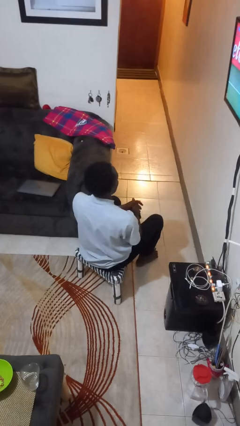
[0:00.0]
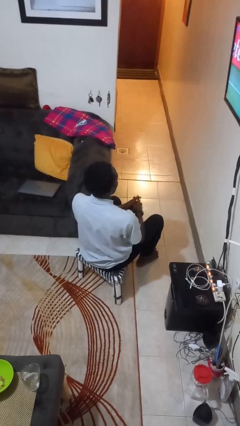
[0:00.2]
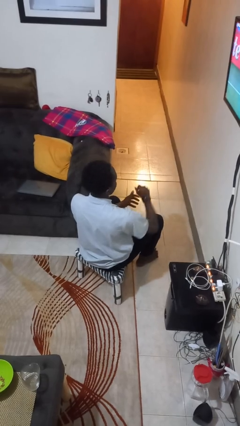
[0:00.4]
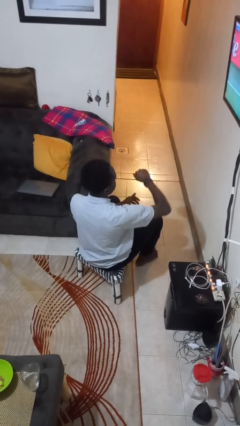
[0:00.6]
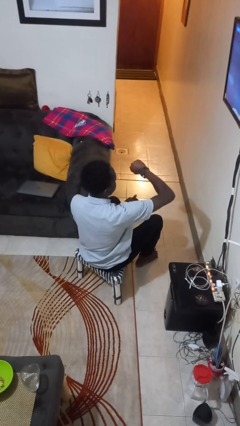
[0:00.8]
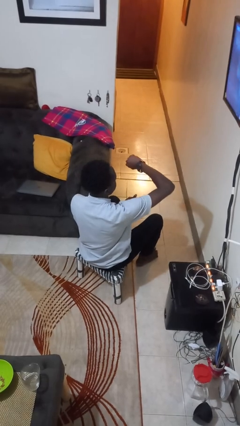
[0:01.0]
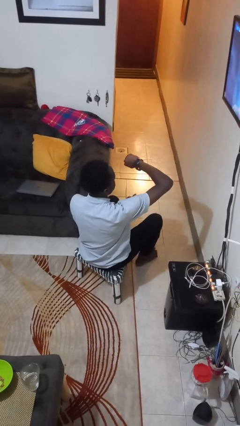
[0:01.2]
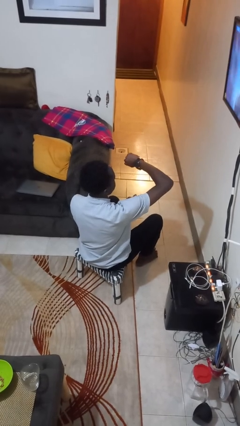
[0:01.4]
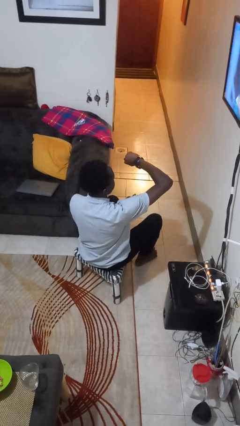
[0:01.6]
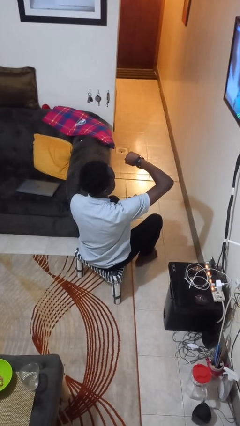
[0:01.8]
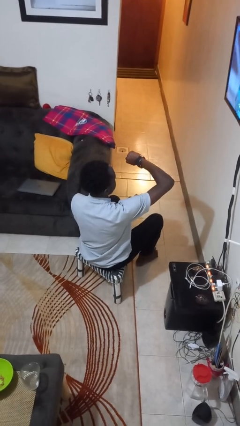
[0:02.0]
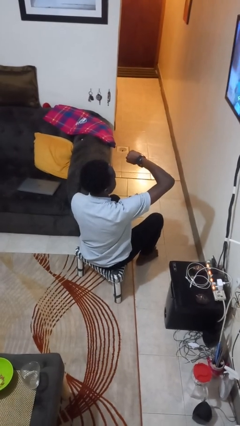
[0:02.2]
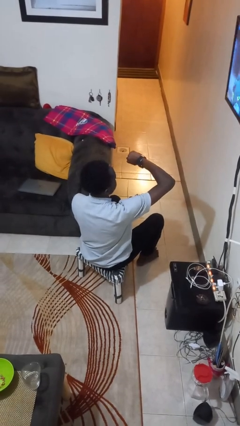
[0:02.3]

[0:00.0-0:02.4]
person looks at wristwatch

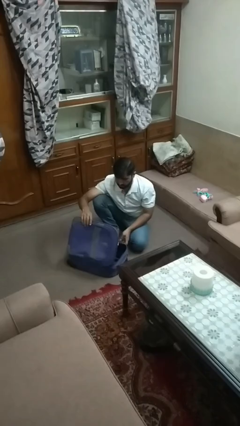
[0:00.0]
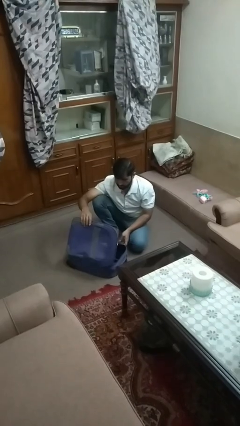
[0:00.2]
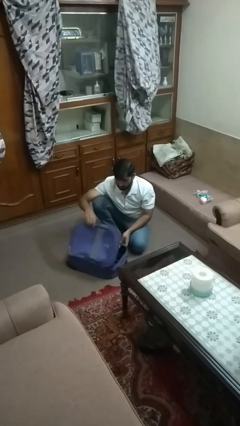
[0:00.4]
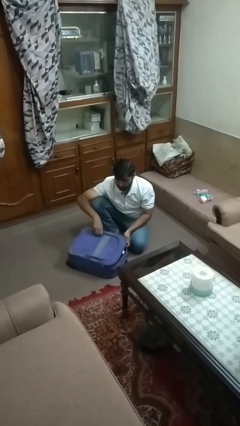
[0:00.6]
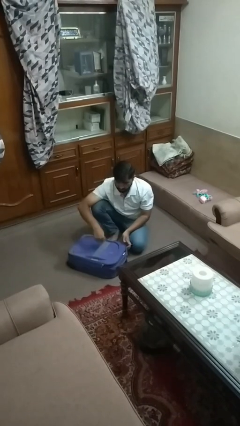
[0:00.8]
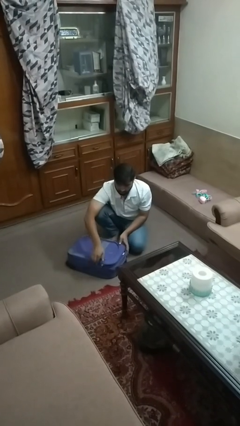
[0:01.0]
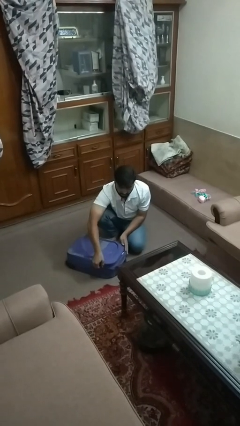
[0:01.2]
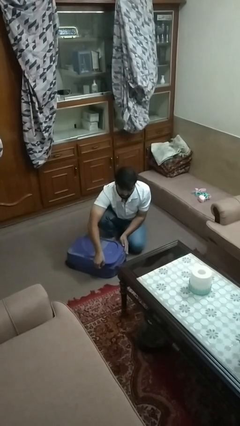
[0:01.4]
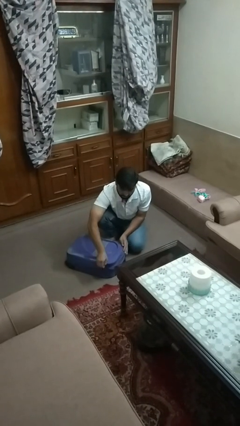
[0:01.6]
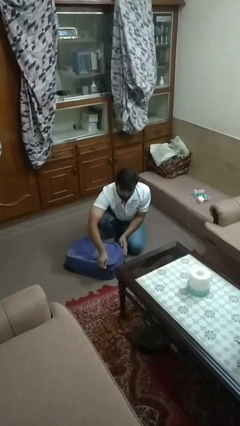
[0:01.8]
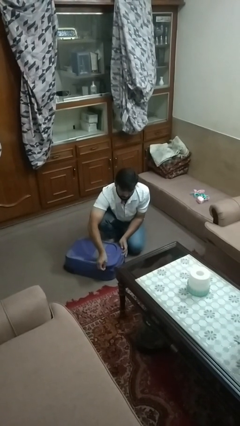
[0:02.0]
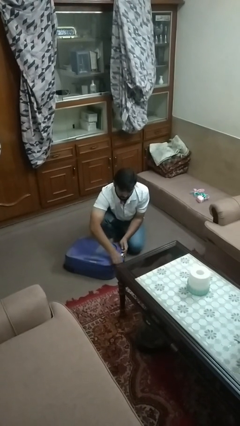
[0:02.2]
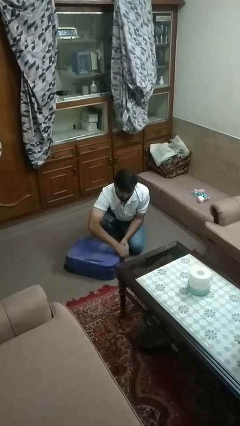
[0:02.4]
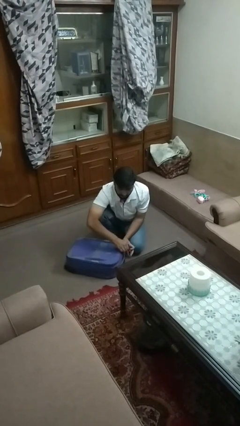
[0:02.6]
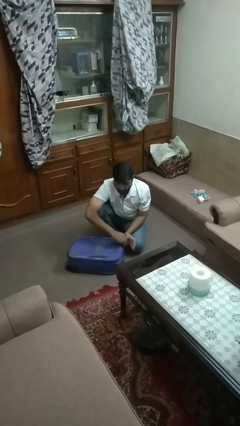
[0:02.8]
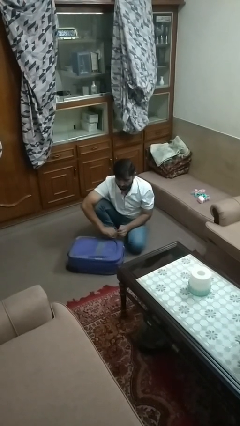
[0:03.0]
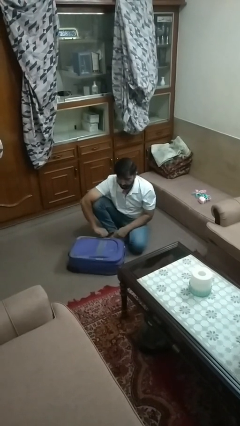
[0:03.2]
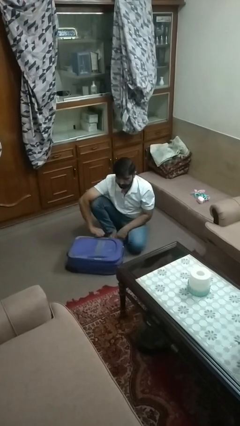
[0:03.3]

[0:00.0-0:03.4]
person closes suitcase

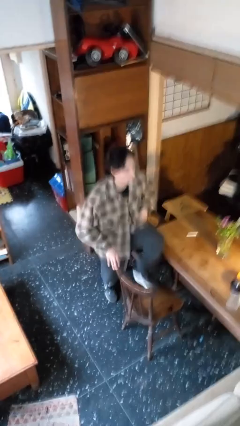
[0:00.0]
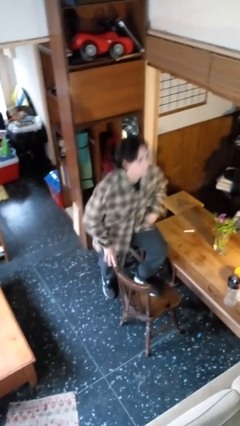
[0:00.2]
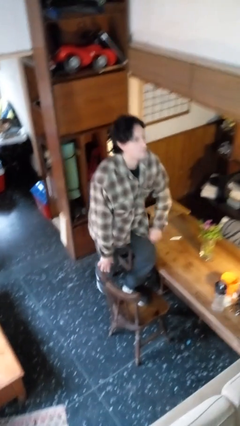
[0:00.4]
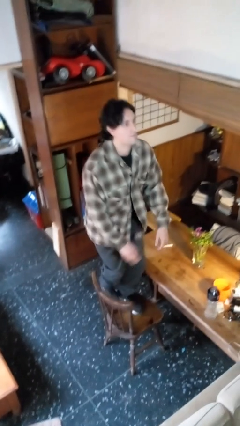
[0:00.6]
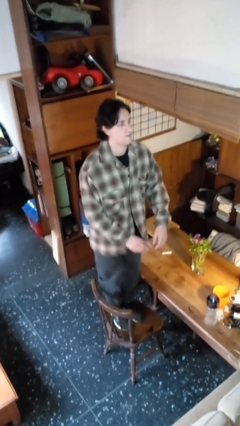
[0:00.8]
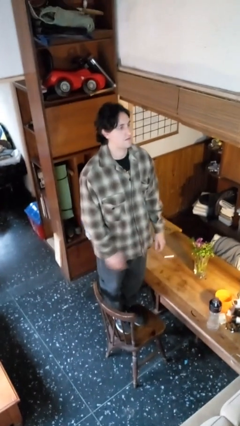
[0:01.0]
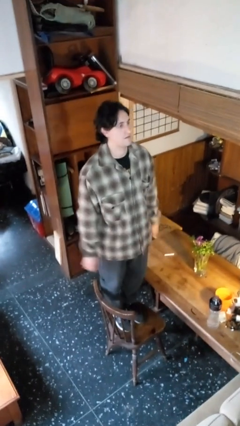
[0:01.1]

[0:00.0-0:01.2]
person climbs on chair

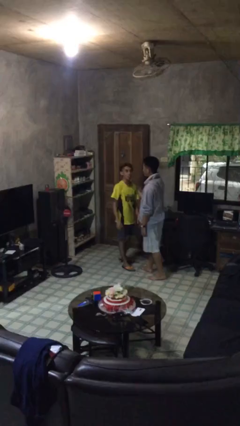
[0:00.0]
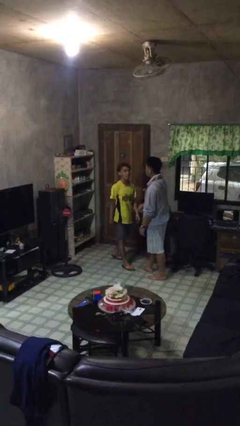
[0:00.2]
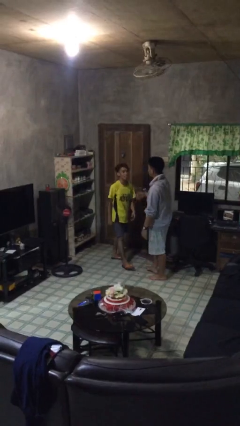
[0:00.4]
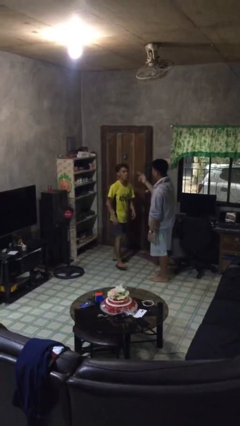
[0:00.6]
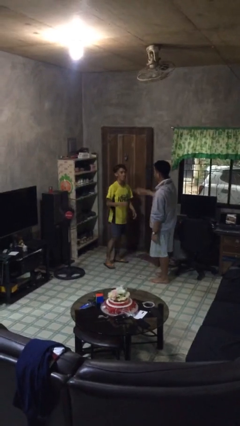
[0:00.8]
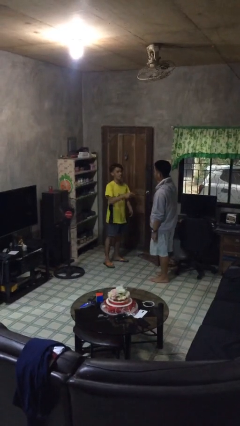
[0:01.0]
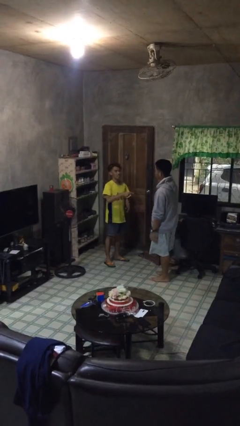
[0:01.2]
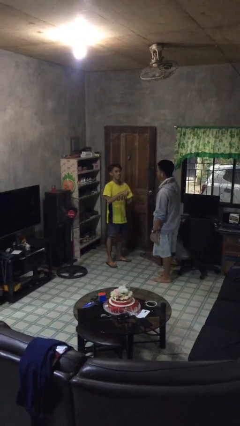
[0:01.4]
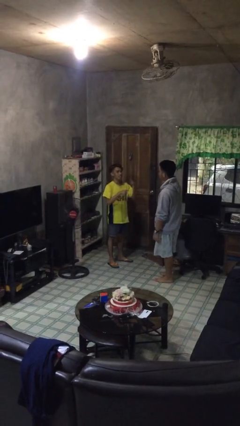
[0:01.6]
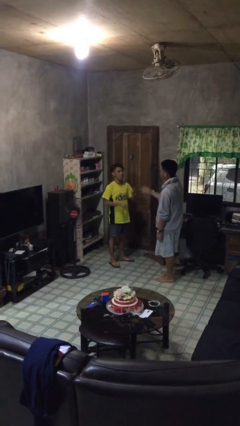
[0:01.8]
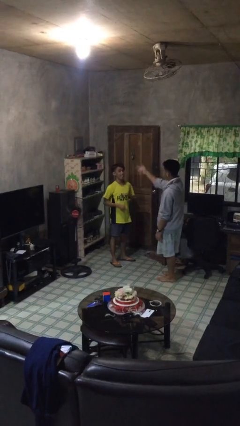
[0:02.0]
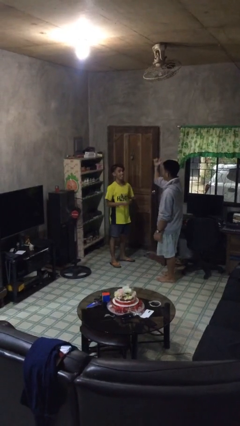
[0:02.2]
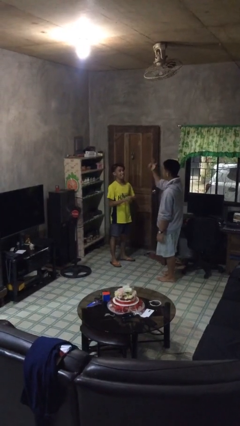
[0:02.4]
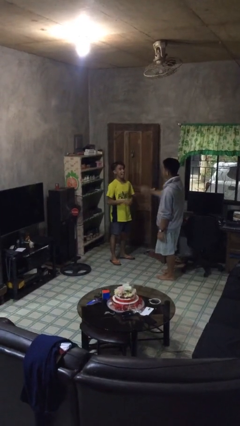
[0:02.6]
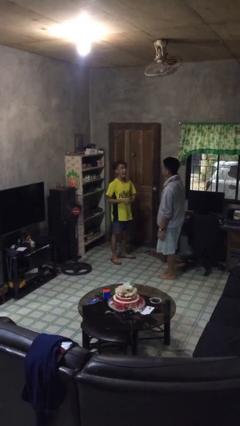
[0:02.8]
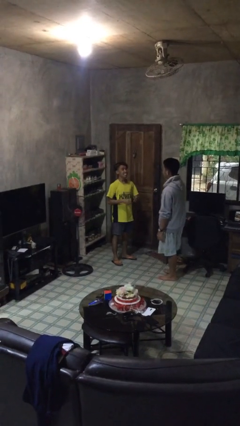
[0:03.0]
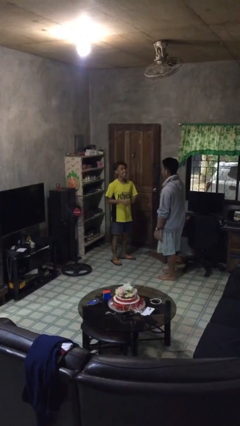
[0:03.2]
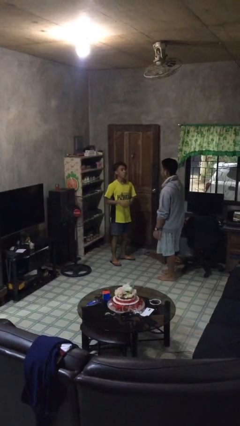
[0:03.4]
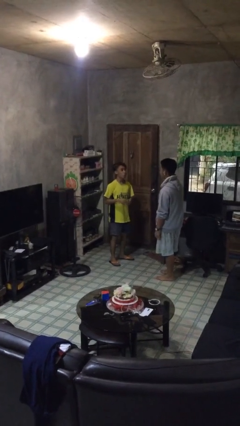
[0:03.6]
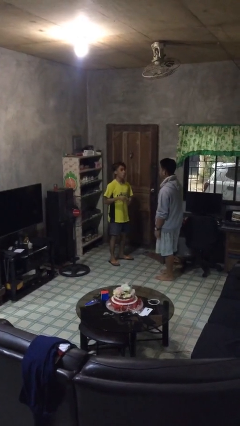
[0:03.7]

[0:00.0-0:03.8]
person talks to person

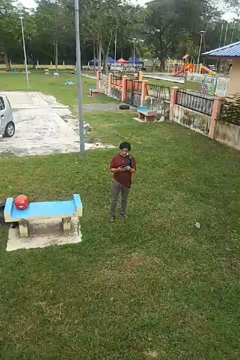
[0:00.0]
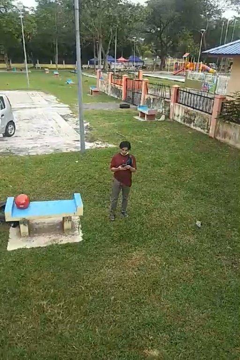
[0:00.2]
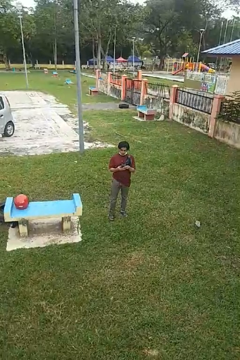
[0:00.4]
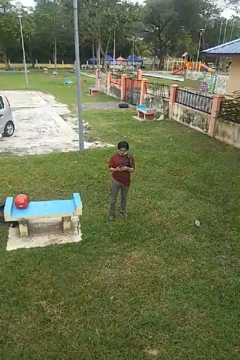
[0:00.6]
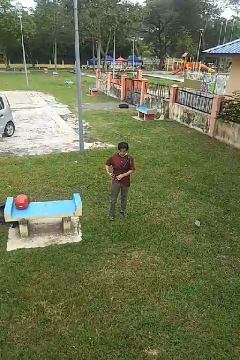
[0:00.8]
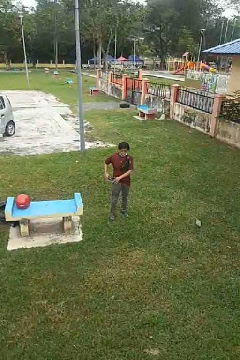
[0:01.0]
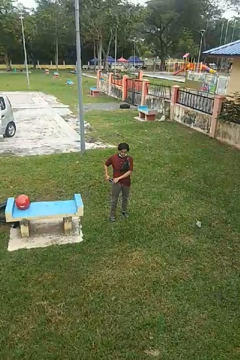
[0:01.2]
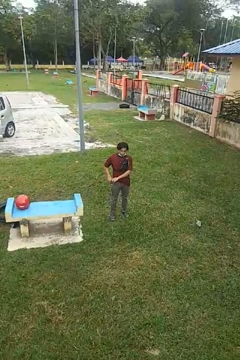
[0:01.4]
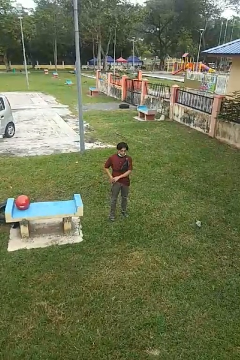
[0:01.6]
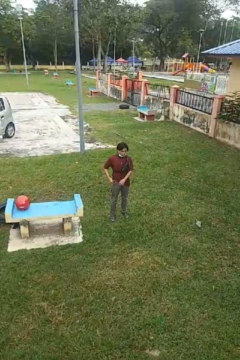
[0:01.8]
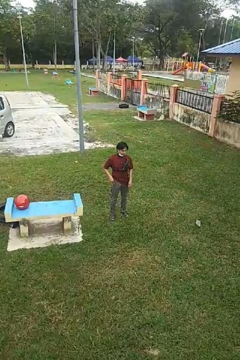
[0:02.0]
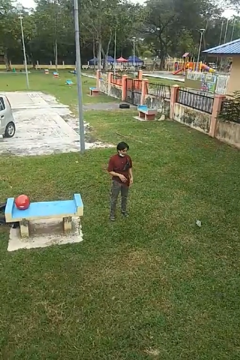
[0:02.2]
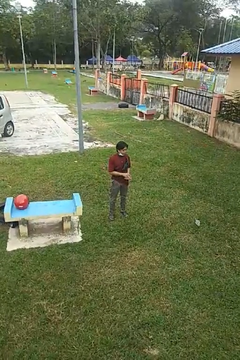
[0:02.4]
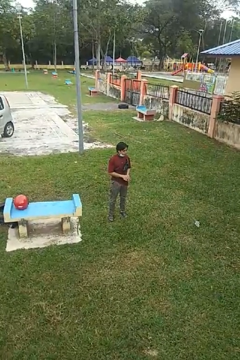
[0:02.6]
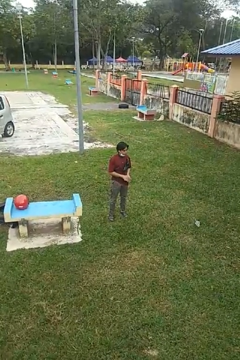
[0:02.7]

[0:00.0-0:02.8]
person puts phone into pocket

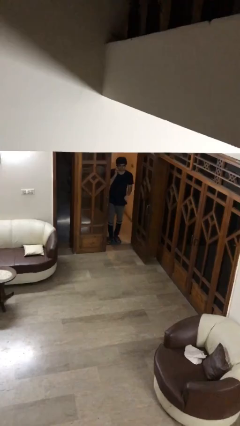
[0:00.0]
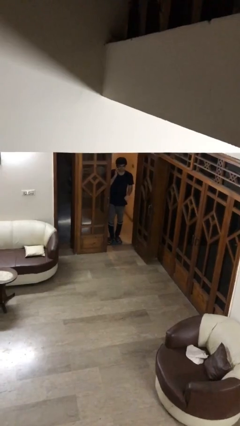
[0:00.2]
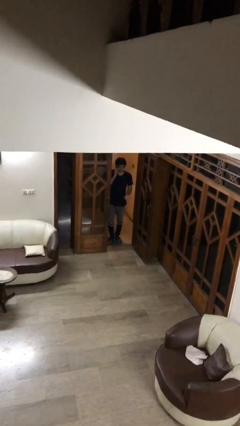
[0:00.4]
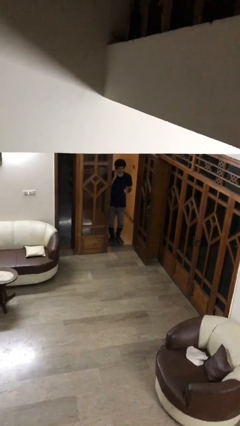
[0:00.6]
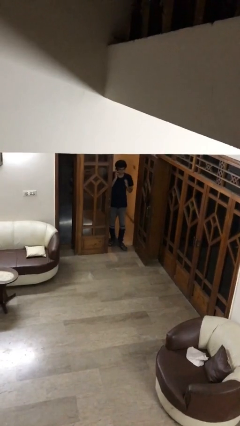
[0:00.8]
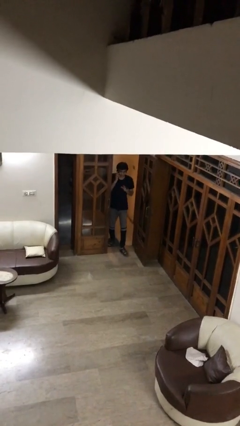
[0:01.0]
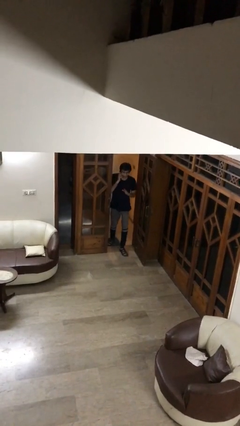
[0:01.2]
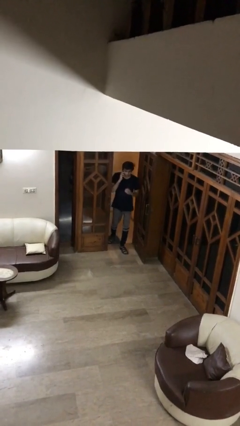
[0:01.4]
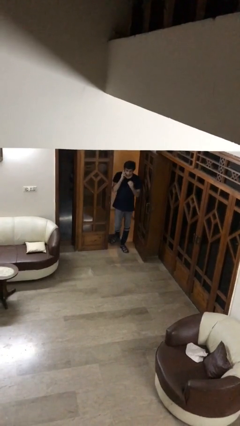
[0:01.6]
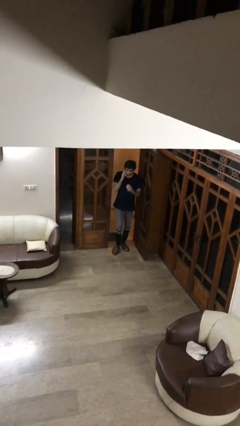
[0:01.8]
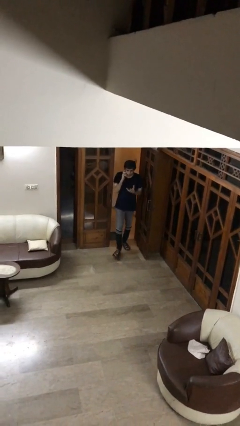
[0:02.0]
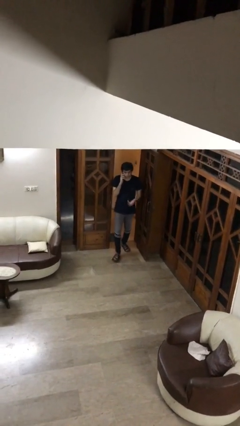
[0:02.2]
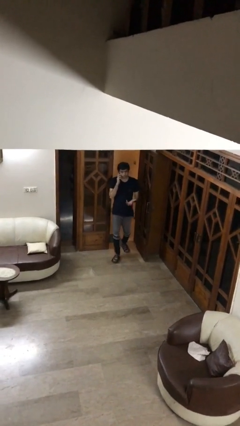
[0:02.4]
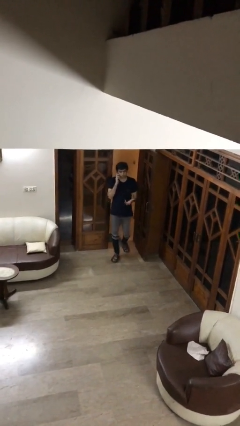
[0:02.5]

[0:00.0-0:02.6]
person enters scene through structure

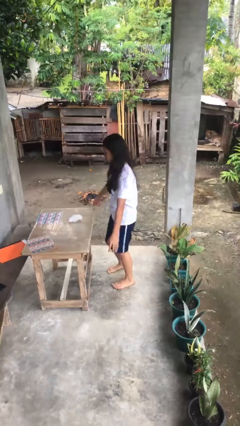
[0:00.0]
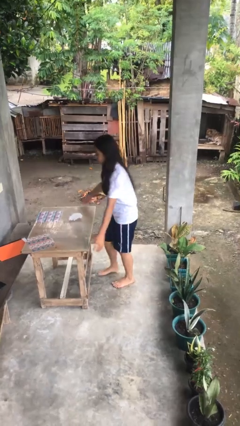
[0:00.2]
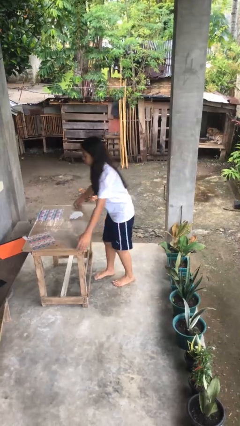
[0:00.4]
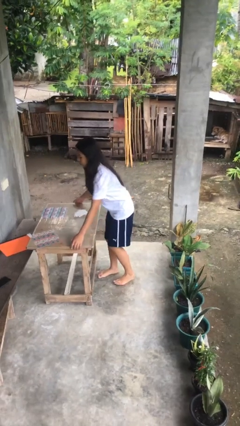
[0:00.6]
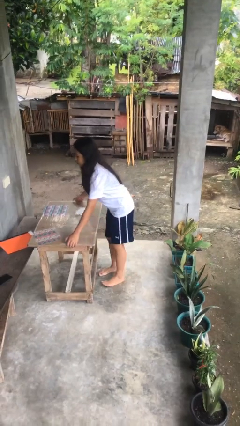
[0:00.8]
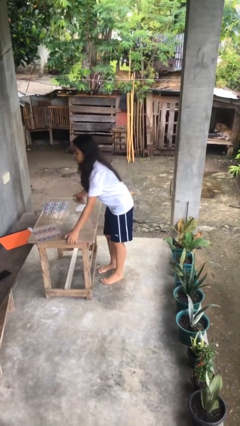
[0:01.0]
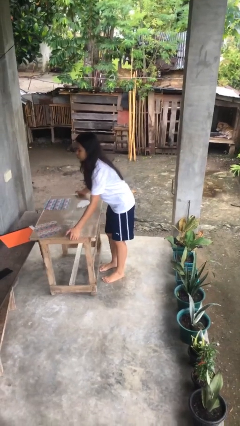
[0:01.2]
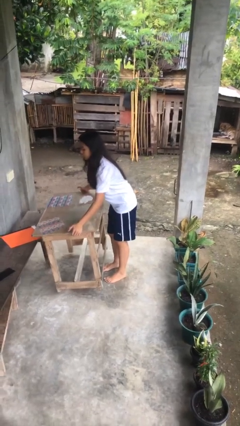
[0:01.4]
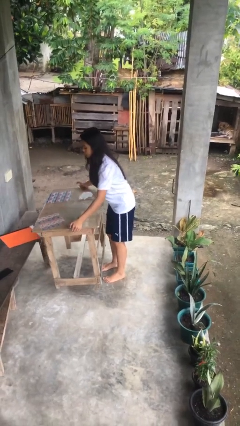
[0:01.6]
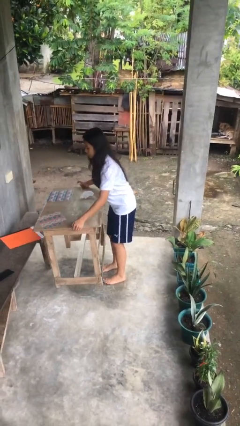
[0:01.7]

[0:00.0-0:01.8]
person picks up object from floor
